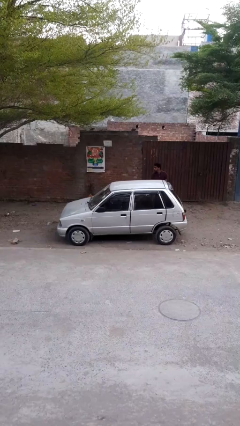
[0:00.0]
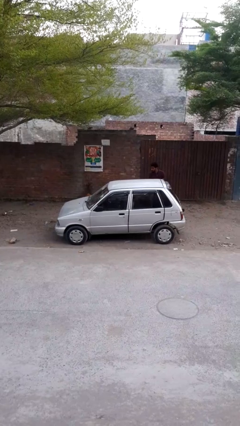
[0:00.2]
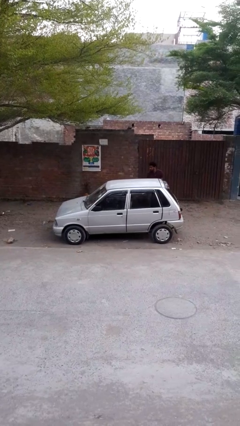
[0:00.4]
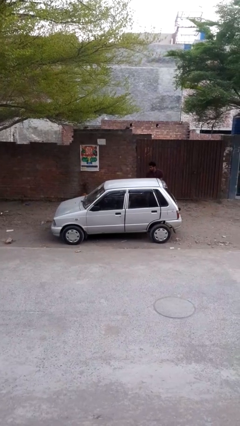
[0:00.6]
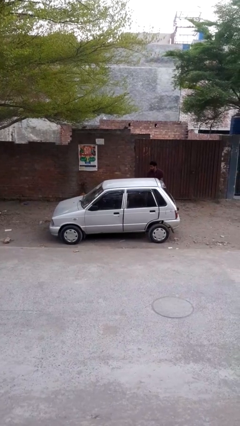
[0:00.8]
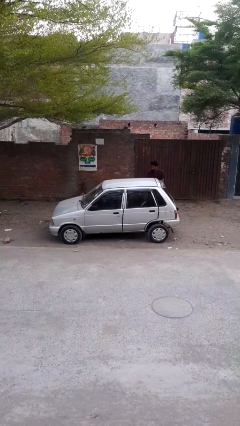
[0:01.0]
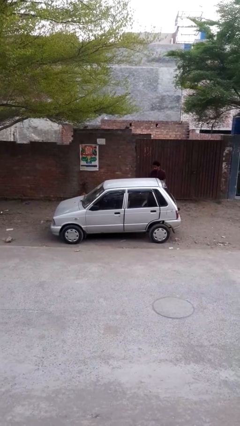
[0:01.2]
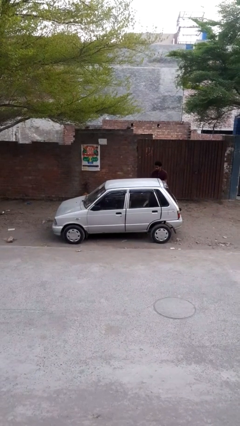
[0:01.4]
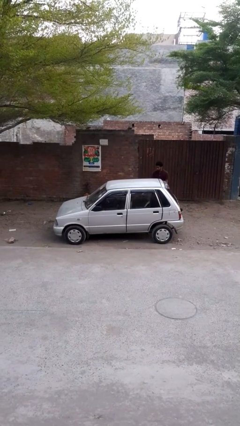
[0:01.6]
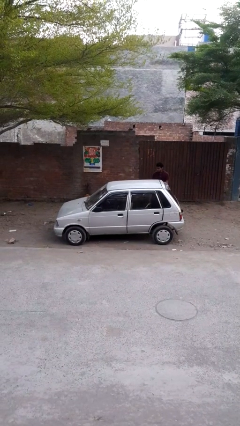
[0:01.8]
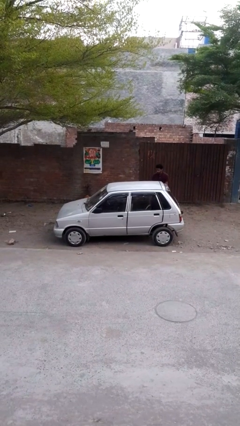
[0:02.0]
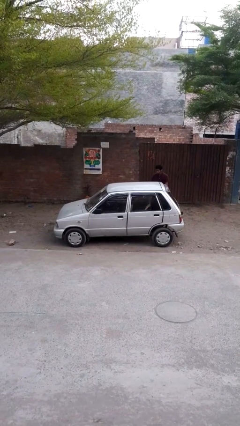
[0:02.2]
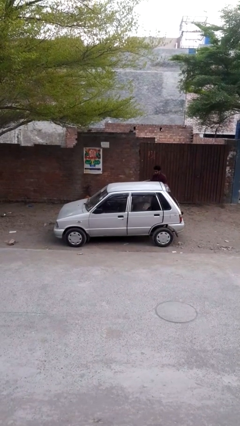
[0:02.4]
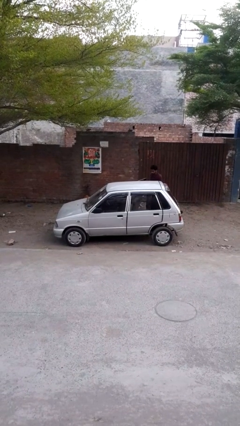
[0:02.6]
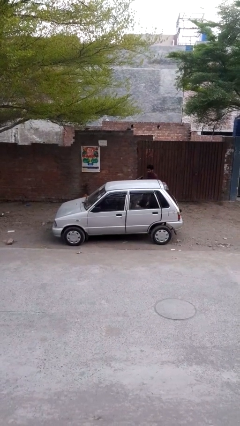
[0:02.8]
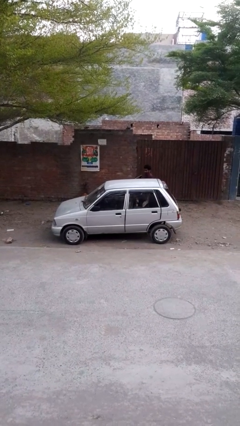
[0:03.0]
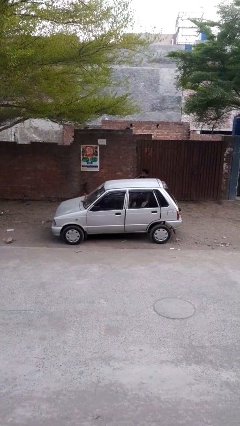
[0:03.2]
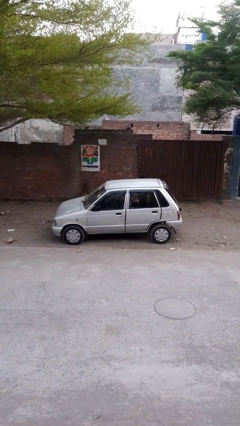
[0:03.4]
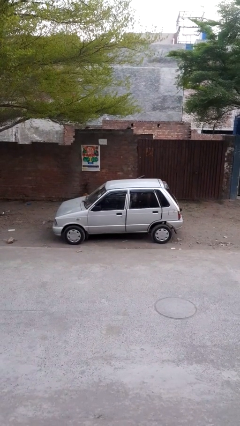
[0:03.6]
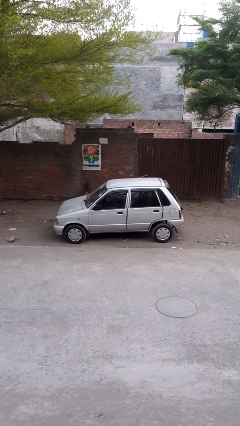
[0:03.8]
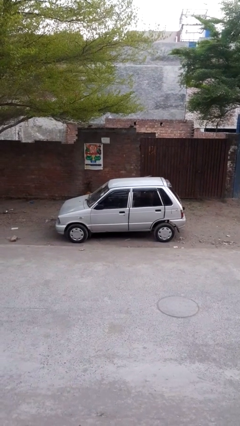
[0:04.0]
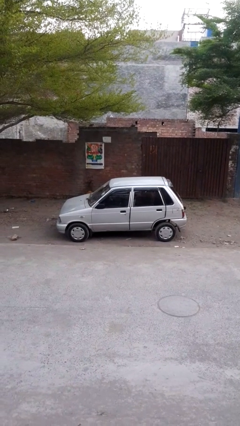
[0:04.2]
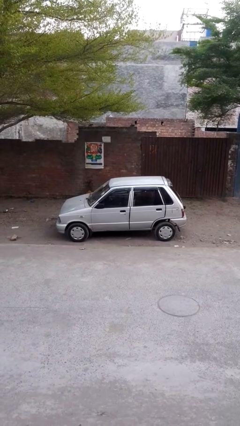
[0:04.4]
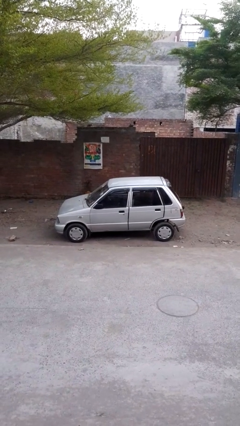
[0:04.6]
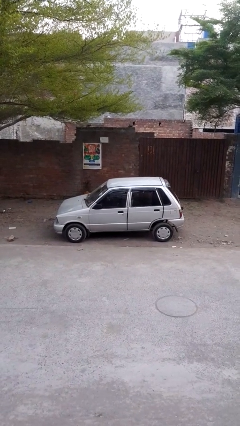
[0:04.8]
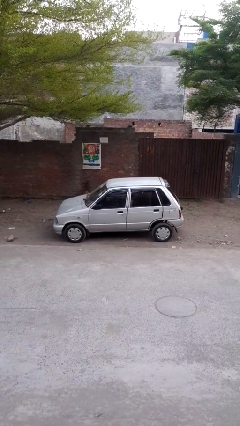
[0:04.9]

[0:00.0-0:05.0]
car picks up person

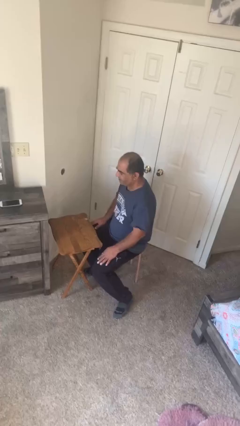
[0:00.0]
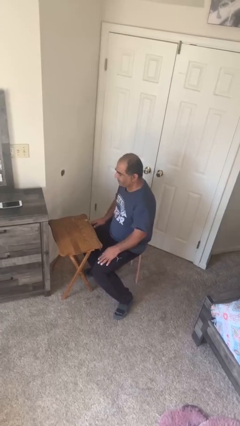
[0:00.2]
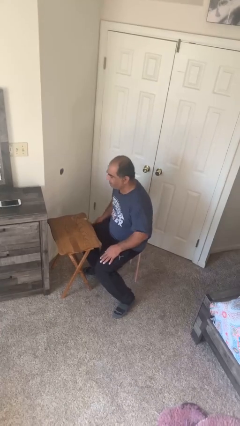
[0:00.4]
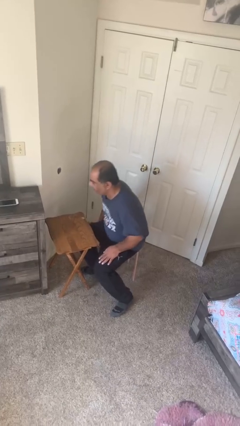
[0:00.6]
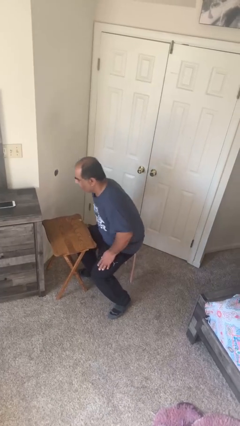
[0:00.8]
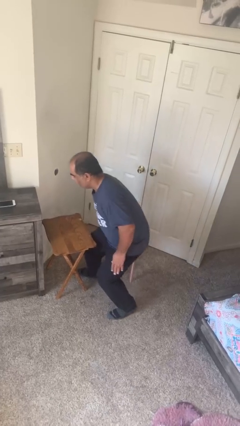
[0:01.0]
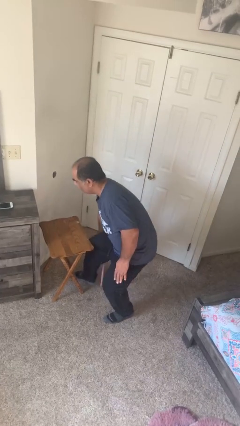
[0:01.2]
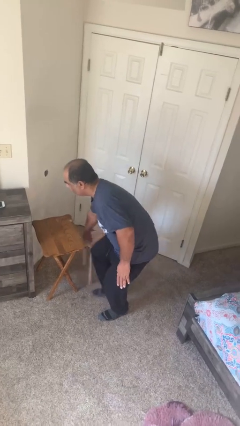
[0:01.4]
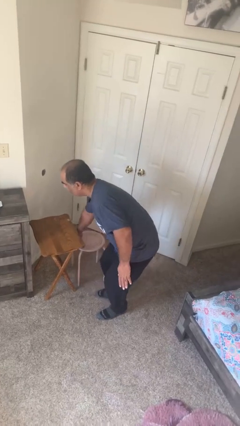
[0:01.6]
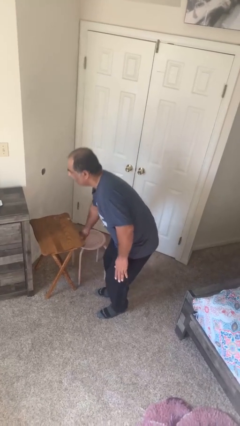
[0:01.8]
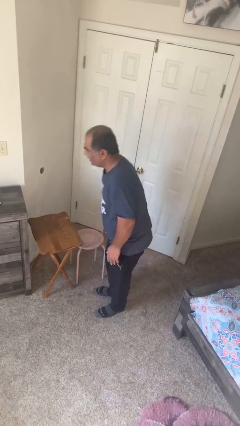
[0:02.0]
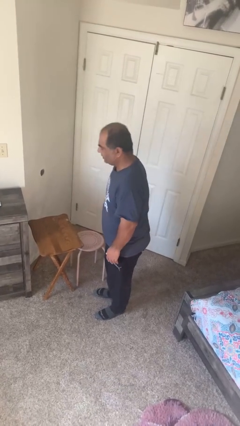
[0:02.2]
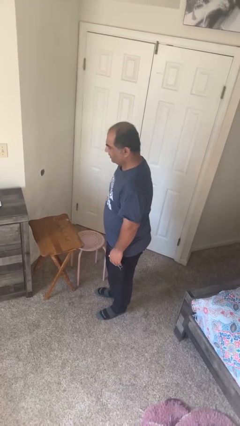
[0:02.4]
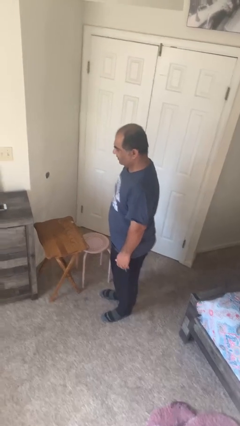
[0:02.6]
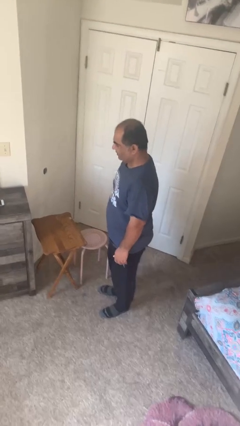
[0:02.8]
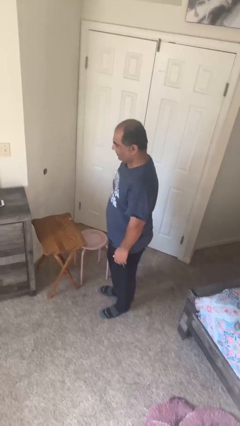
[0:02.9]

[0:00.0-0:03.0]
person stands up

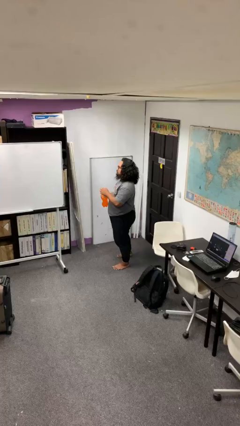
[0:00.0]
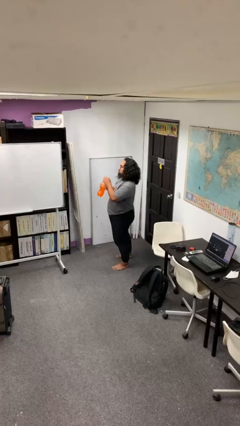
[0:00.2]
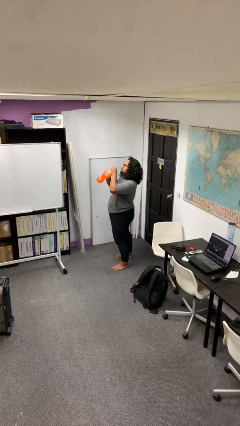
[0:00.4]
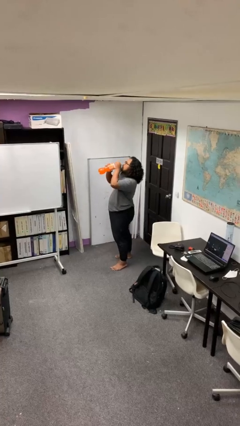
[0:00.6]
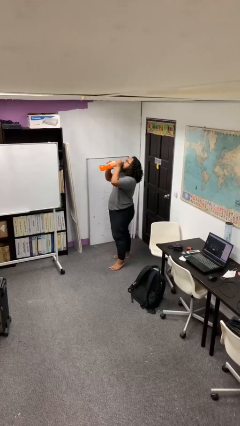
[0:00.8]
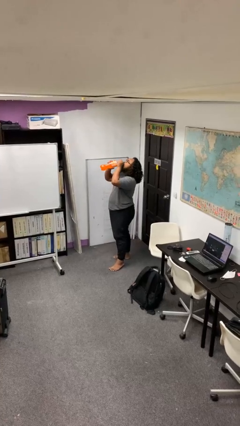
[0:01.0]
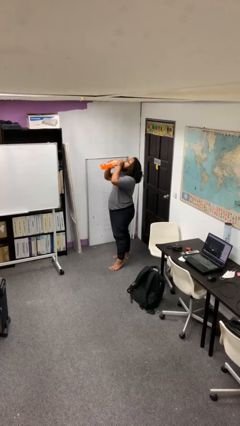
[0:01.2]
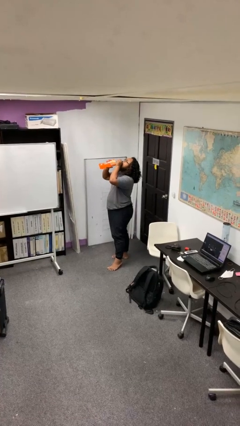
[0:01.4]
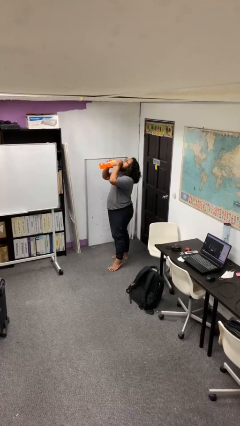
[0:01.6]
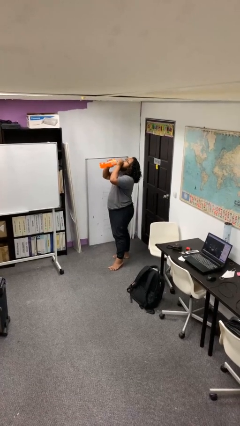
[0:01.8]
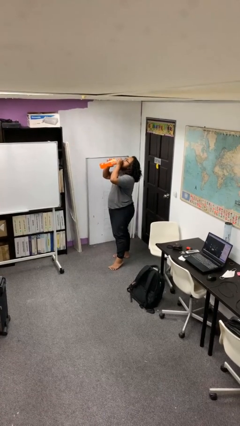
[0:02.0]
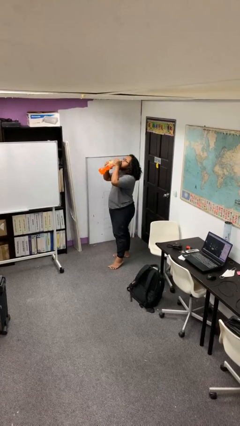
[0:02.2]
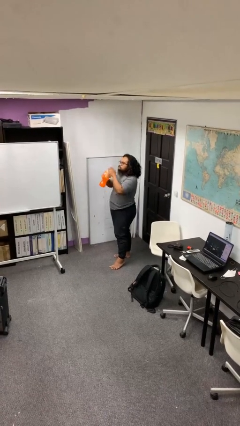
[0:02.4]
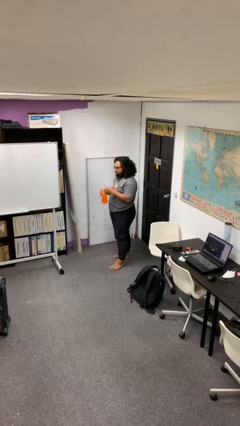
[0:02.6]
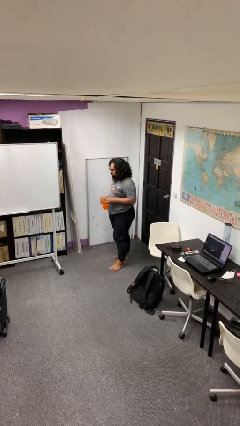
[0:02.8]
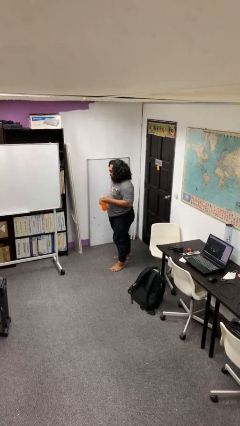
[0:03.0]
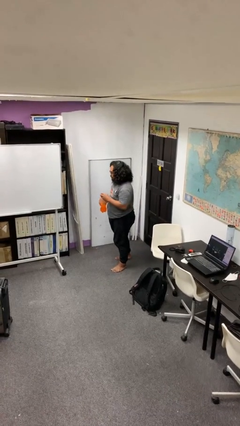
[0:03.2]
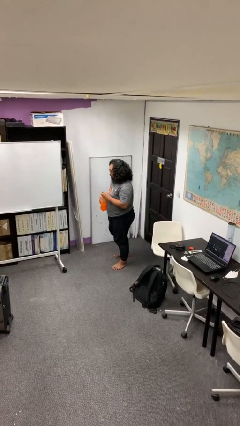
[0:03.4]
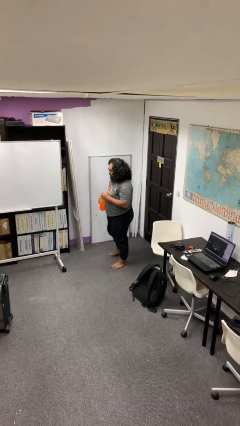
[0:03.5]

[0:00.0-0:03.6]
person drinks from bottle

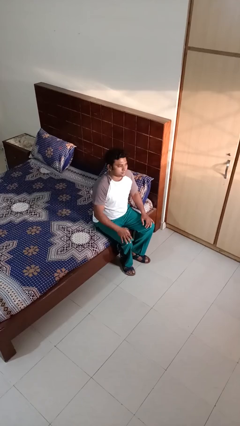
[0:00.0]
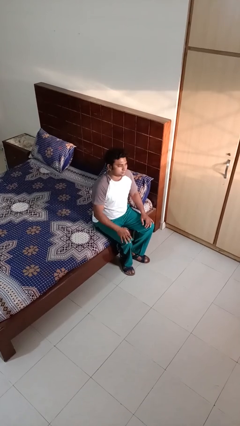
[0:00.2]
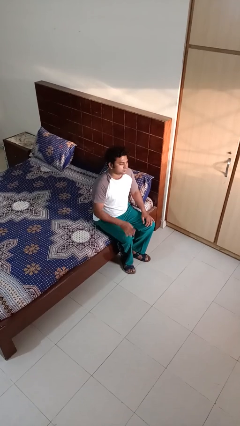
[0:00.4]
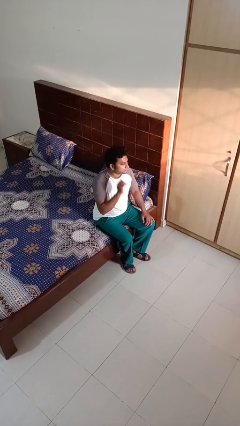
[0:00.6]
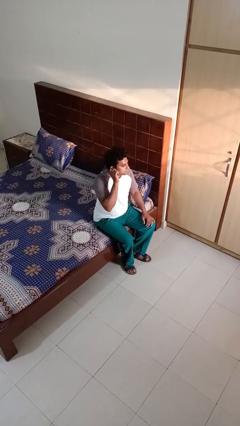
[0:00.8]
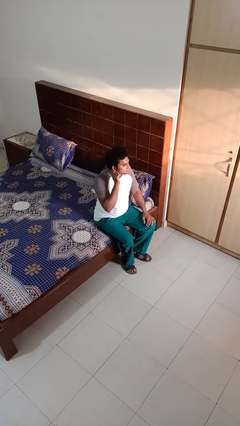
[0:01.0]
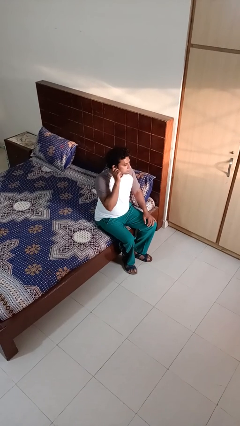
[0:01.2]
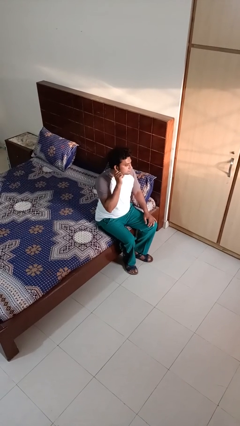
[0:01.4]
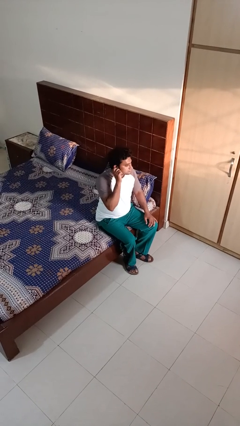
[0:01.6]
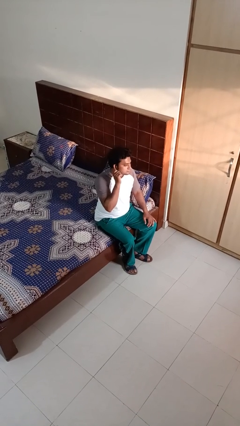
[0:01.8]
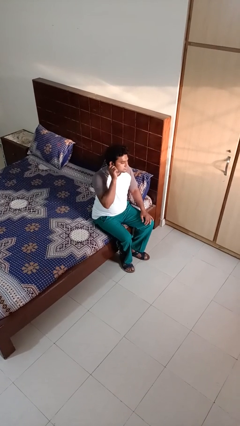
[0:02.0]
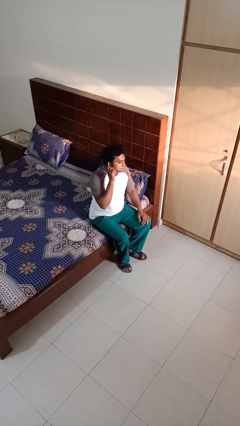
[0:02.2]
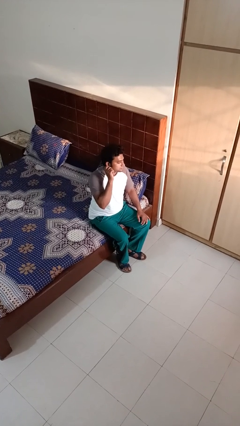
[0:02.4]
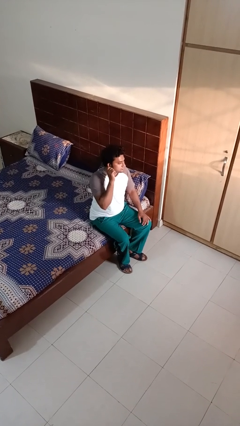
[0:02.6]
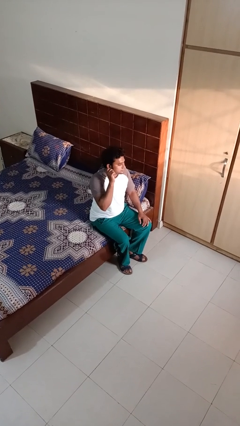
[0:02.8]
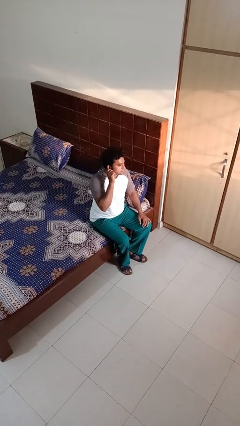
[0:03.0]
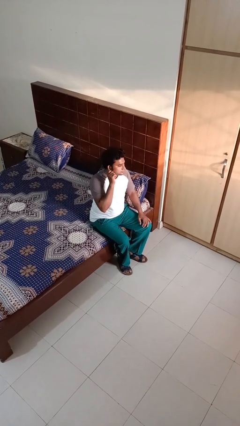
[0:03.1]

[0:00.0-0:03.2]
person touches earlobe

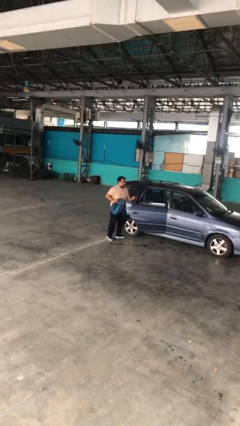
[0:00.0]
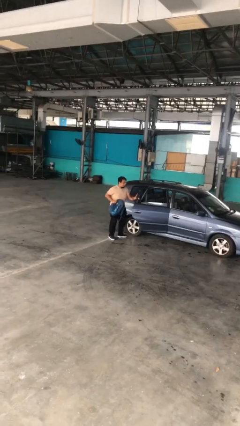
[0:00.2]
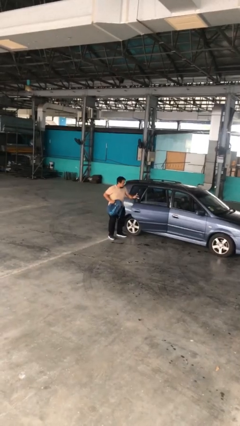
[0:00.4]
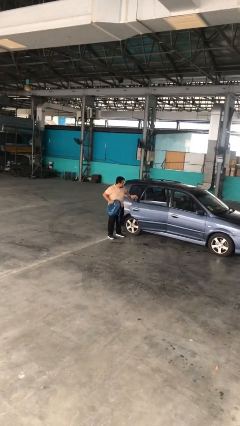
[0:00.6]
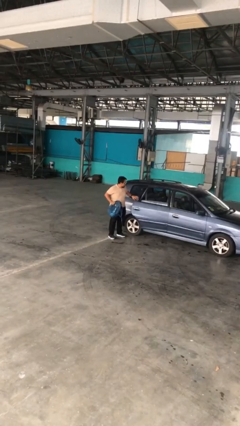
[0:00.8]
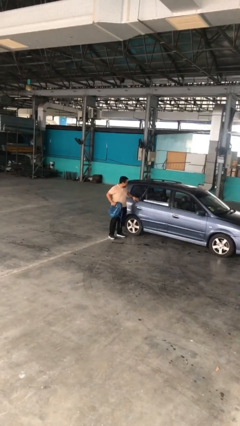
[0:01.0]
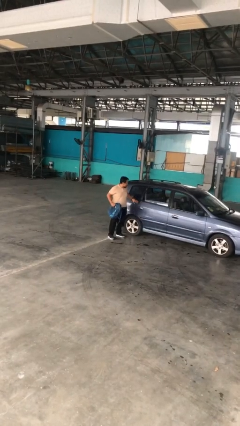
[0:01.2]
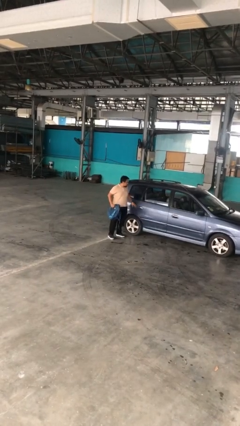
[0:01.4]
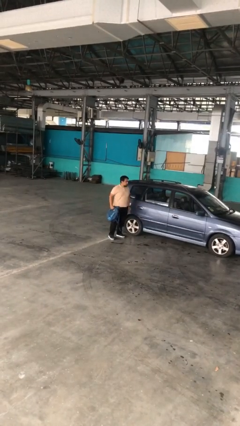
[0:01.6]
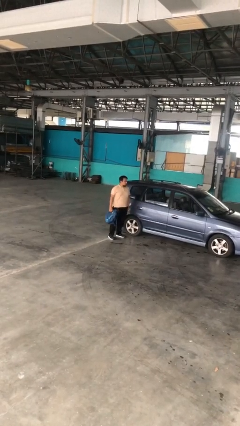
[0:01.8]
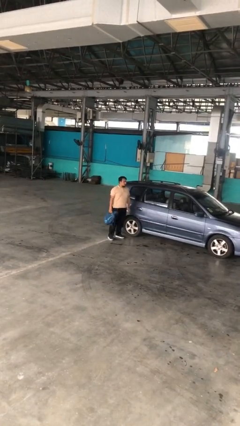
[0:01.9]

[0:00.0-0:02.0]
person closes car door

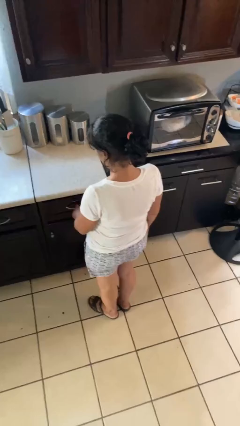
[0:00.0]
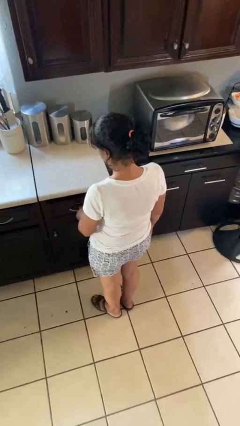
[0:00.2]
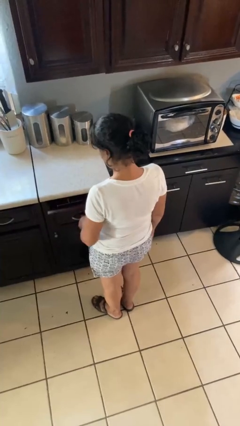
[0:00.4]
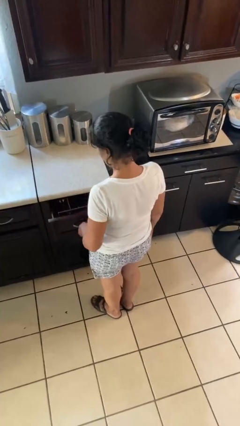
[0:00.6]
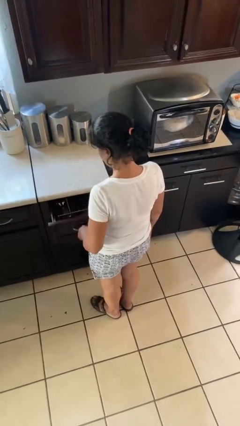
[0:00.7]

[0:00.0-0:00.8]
person opens kitchen drawer
